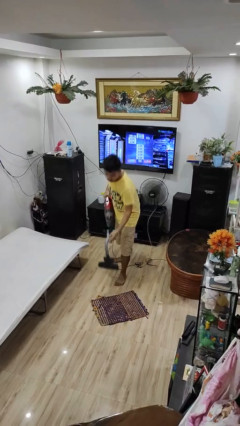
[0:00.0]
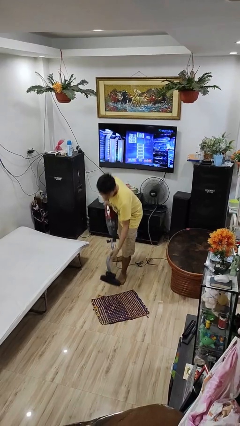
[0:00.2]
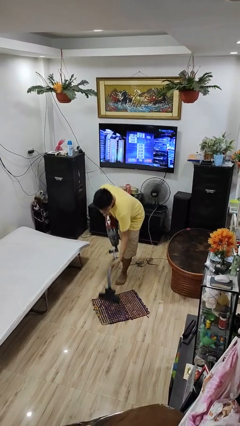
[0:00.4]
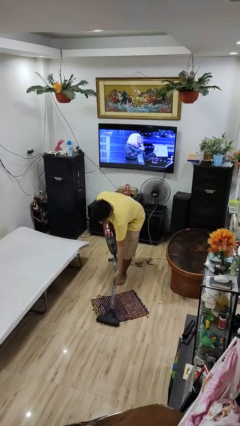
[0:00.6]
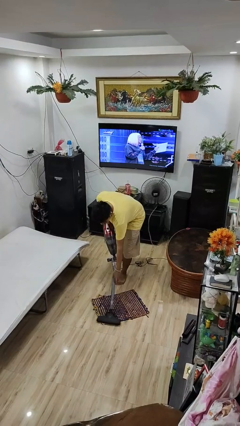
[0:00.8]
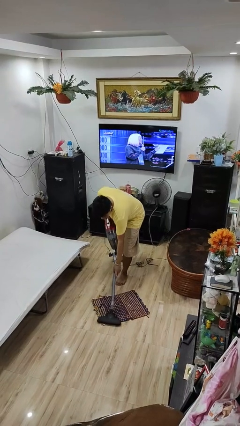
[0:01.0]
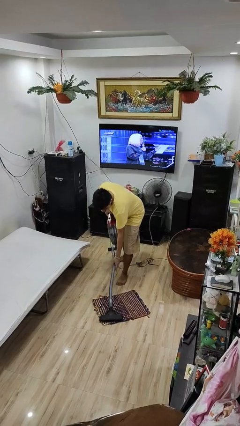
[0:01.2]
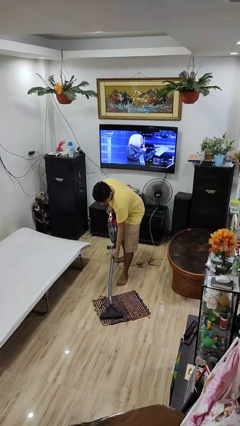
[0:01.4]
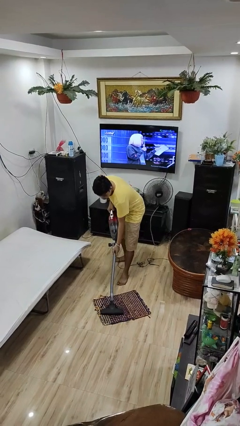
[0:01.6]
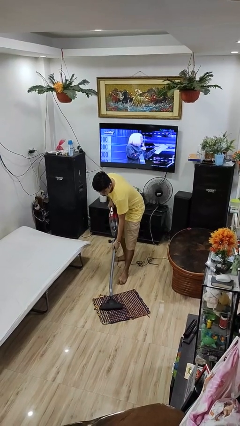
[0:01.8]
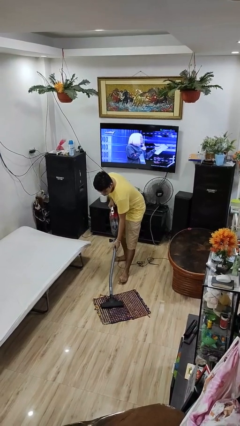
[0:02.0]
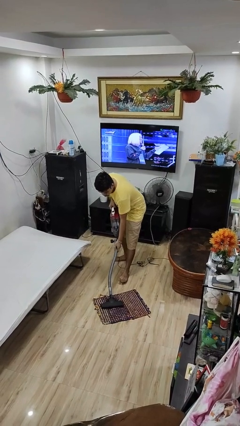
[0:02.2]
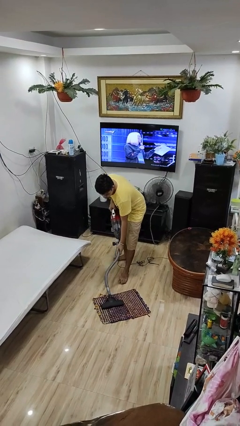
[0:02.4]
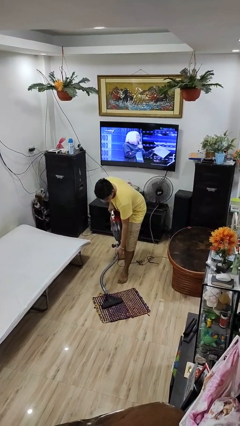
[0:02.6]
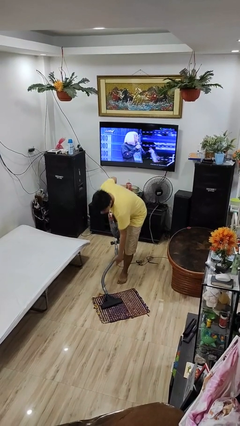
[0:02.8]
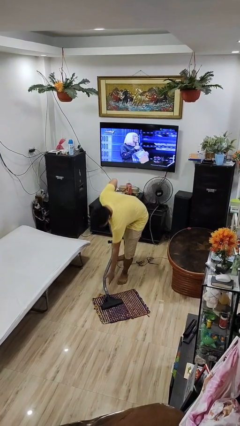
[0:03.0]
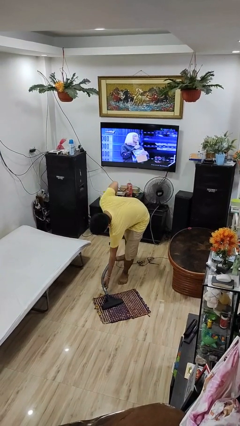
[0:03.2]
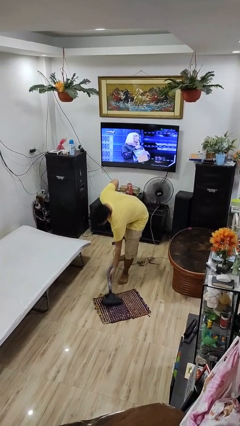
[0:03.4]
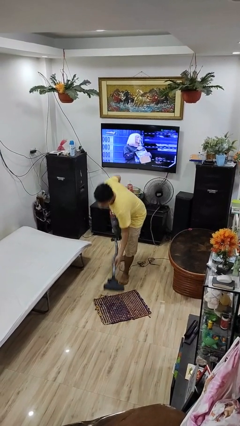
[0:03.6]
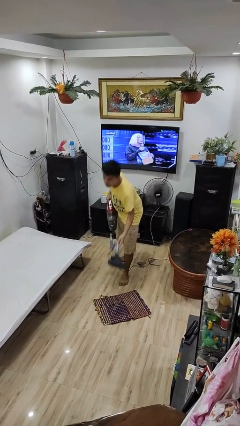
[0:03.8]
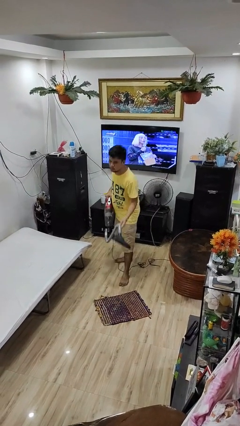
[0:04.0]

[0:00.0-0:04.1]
person vacuums carpet

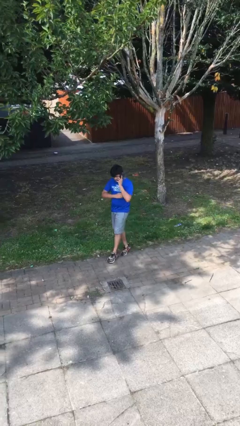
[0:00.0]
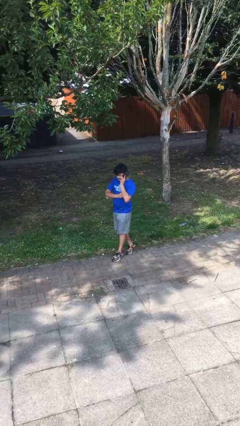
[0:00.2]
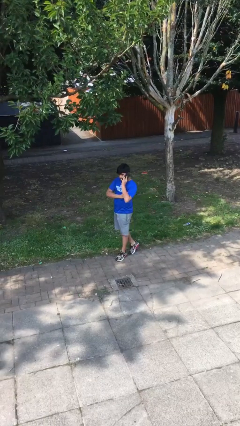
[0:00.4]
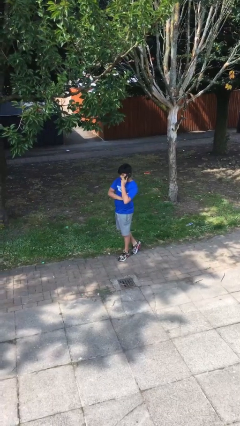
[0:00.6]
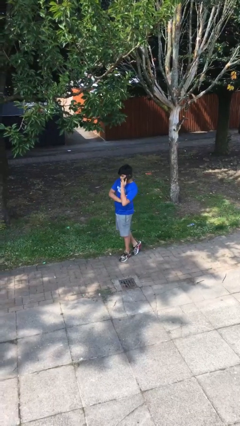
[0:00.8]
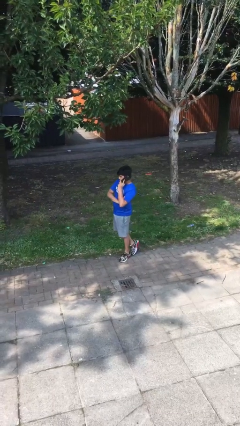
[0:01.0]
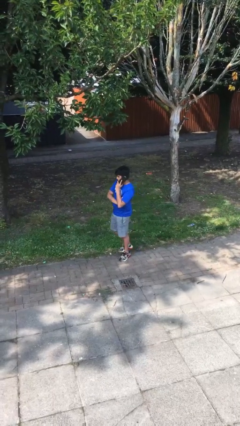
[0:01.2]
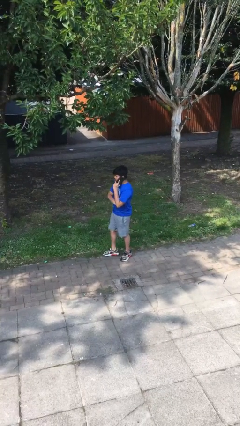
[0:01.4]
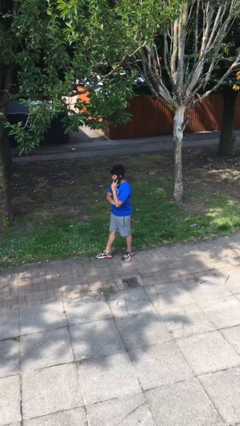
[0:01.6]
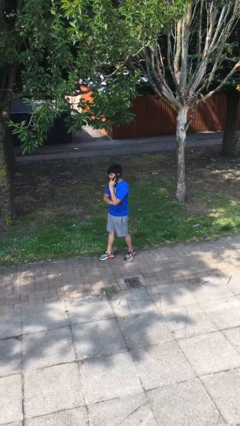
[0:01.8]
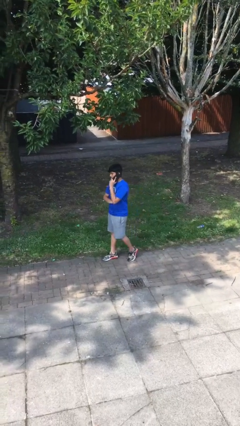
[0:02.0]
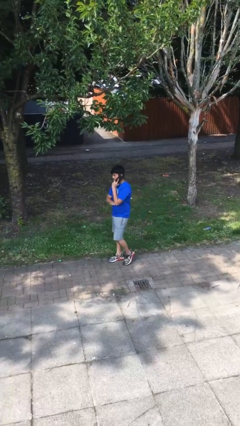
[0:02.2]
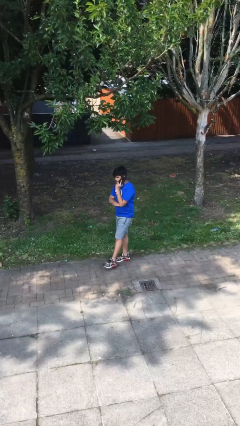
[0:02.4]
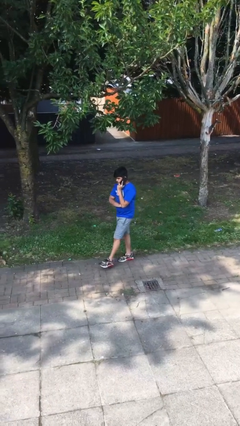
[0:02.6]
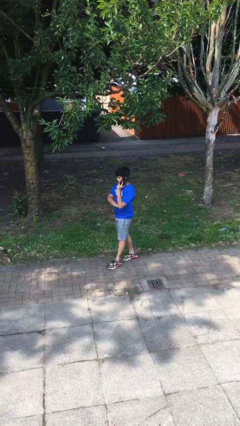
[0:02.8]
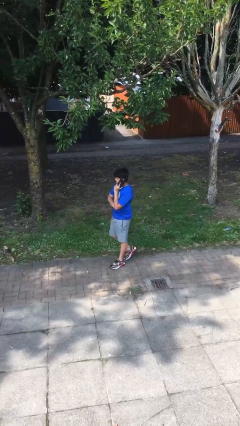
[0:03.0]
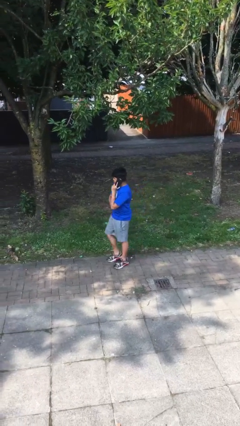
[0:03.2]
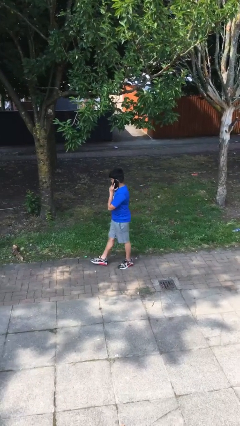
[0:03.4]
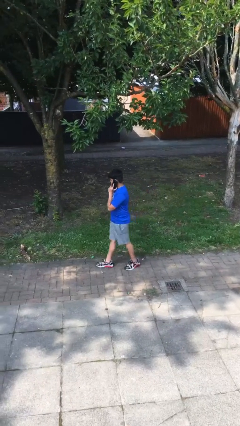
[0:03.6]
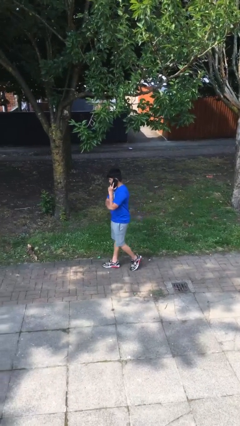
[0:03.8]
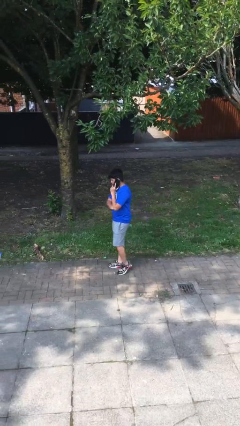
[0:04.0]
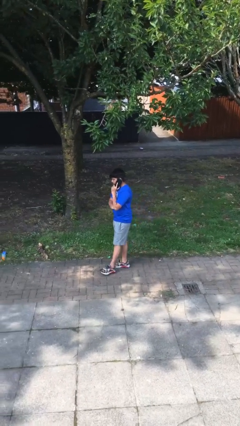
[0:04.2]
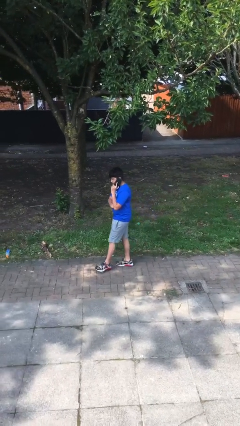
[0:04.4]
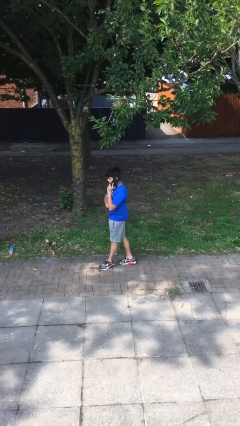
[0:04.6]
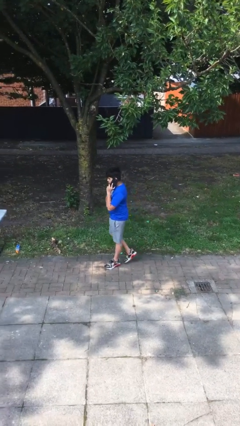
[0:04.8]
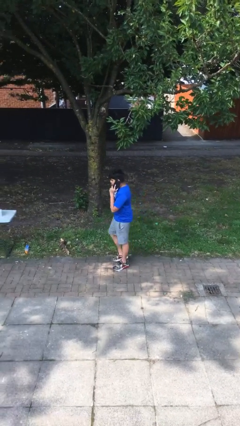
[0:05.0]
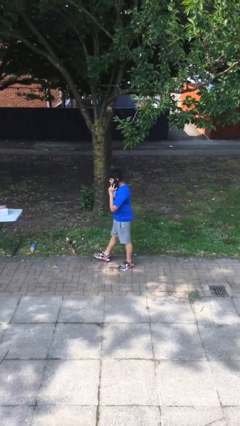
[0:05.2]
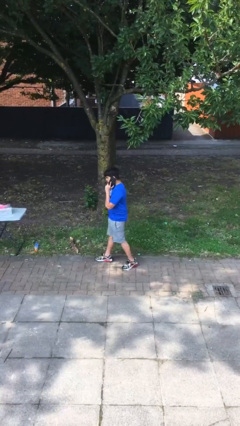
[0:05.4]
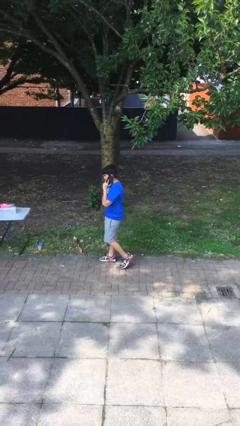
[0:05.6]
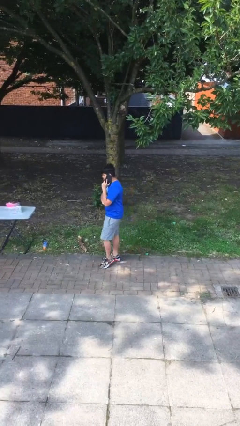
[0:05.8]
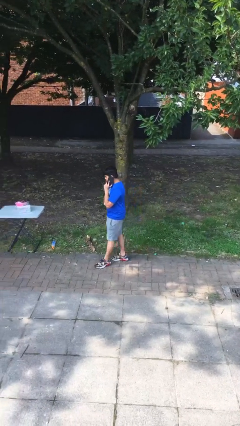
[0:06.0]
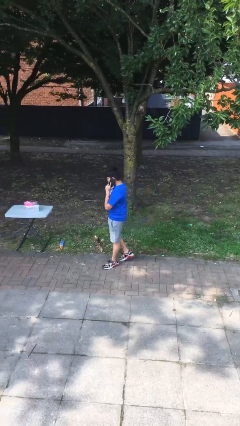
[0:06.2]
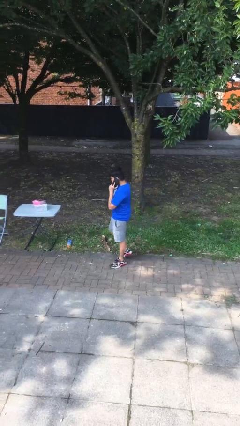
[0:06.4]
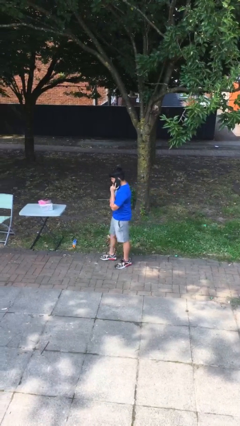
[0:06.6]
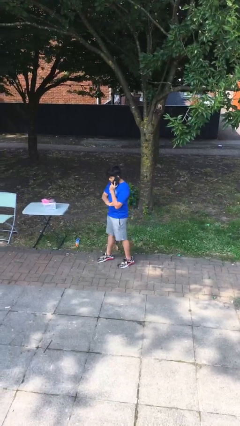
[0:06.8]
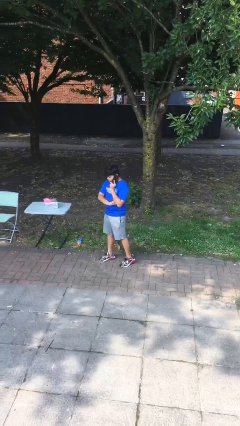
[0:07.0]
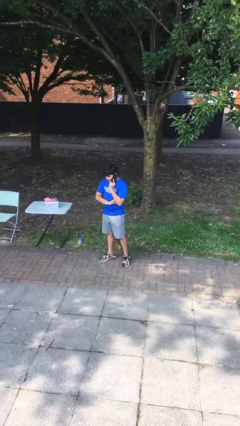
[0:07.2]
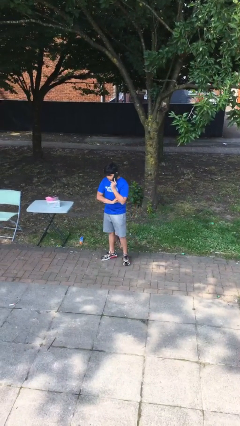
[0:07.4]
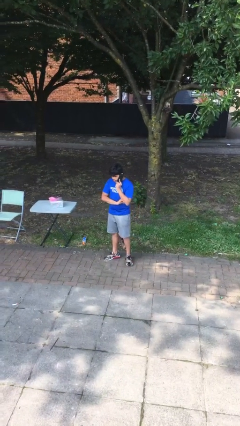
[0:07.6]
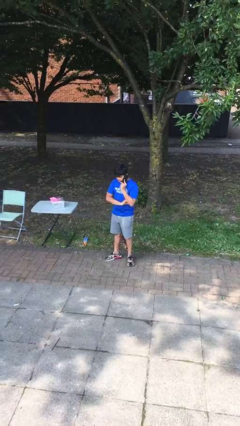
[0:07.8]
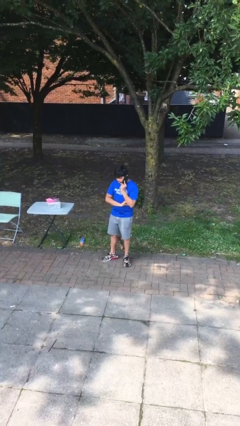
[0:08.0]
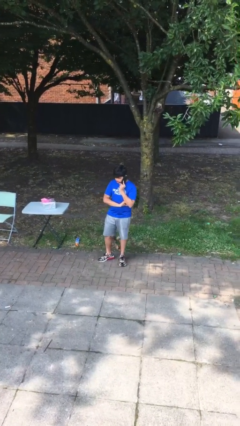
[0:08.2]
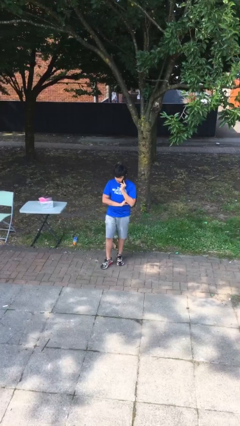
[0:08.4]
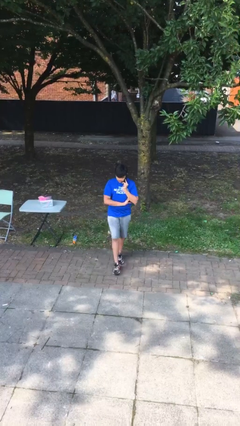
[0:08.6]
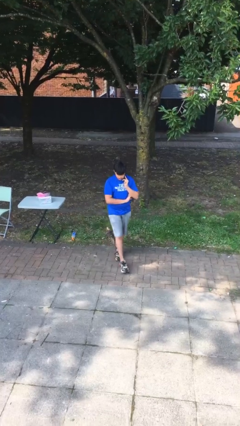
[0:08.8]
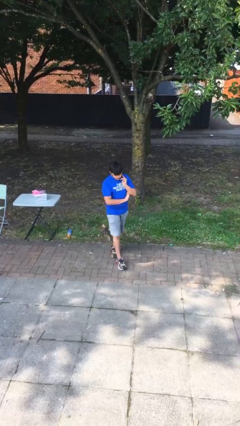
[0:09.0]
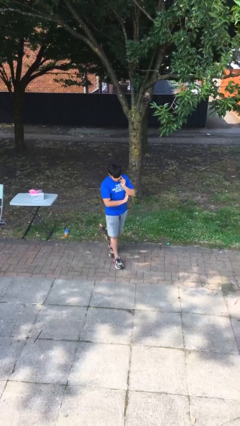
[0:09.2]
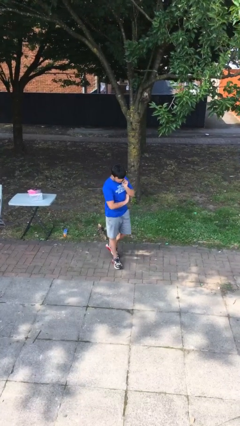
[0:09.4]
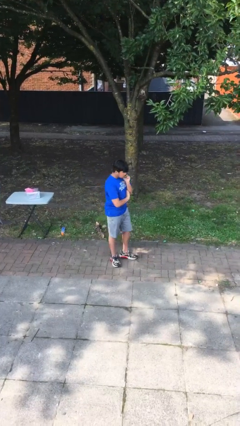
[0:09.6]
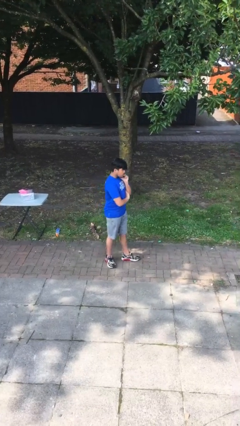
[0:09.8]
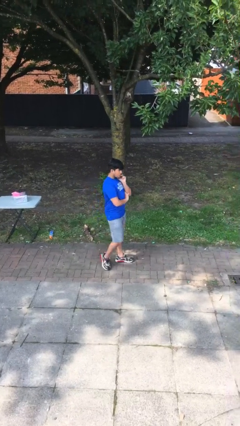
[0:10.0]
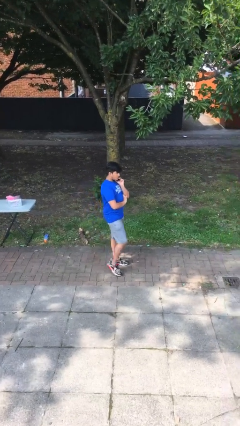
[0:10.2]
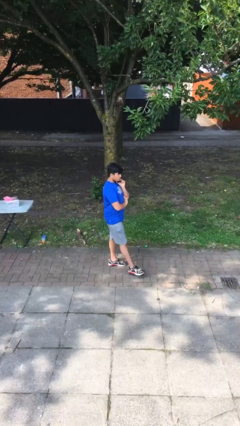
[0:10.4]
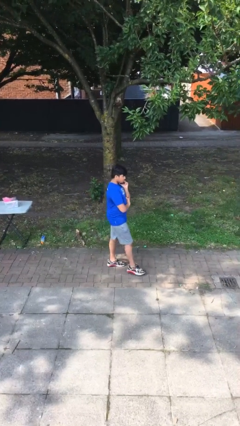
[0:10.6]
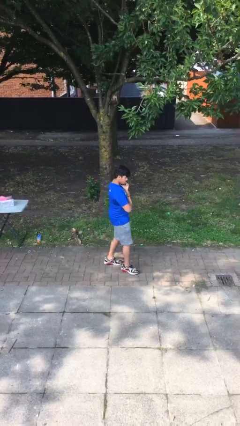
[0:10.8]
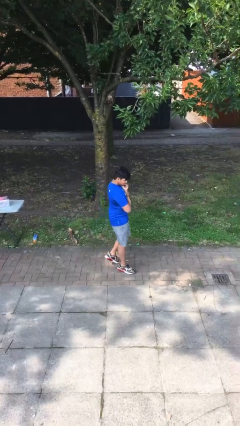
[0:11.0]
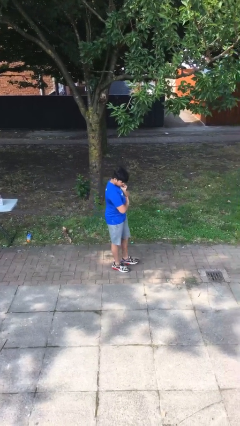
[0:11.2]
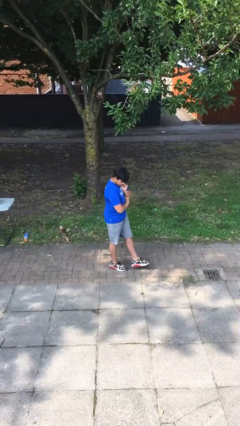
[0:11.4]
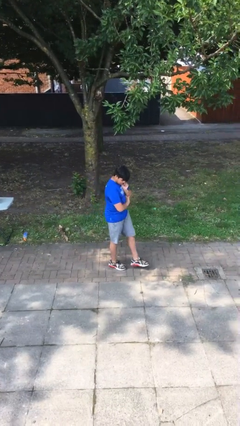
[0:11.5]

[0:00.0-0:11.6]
person talks on phone

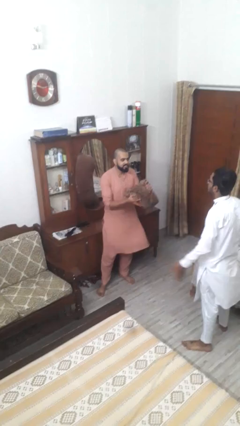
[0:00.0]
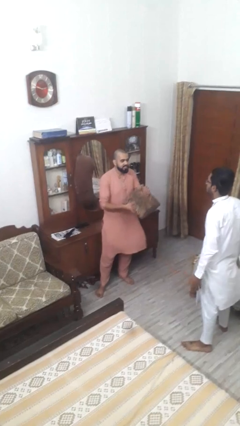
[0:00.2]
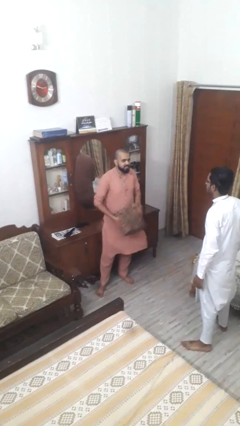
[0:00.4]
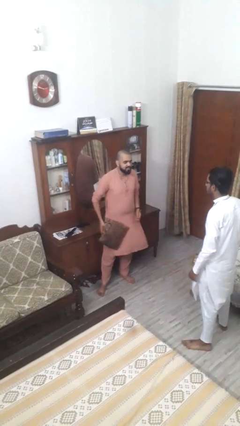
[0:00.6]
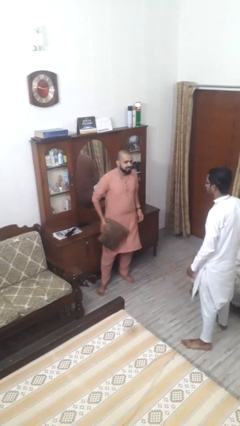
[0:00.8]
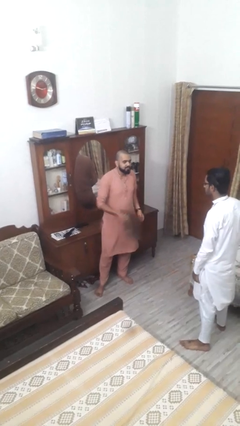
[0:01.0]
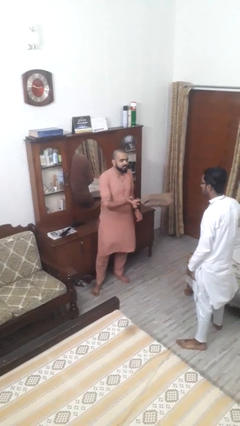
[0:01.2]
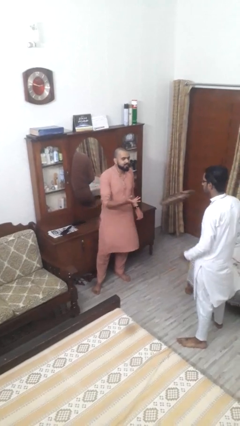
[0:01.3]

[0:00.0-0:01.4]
person catches object from person

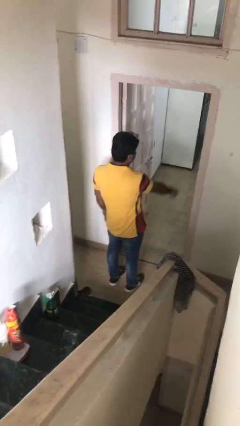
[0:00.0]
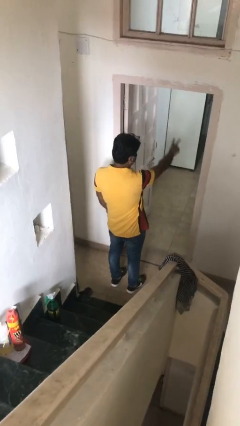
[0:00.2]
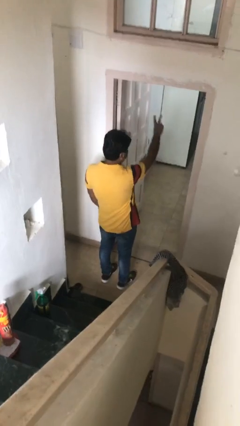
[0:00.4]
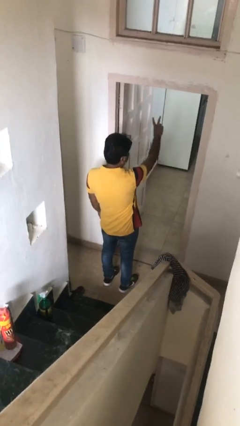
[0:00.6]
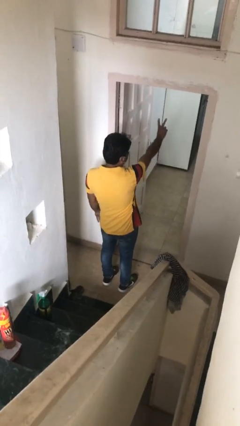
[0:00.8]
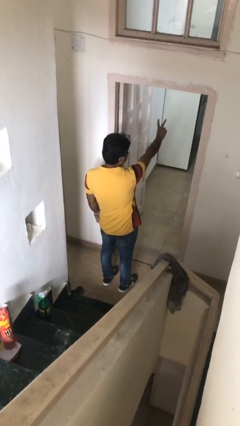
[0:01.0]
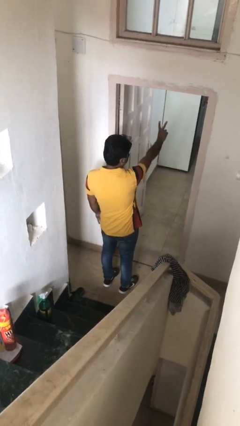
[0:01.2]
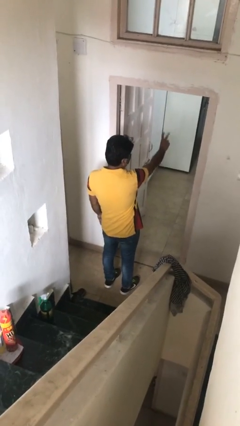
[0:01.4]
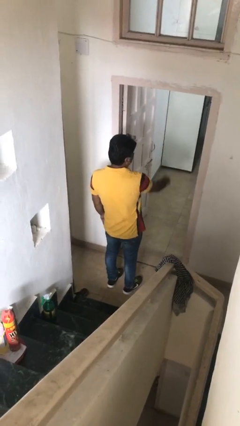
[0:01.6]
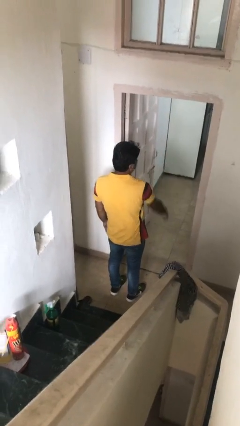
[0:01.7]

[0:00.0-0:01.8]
person gestures peace
